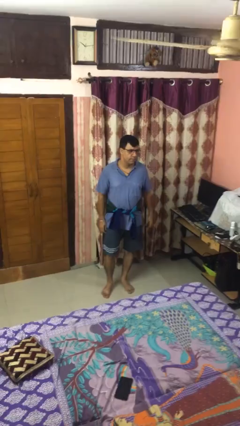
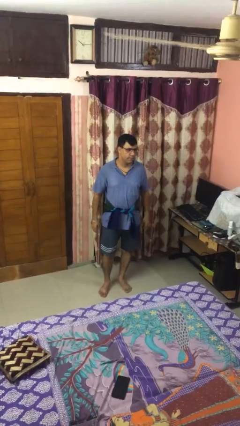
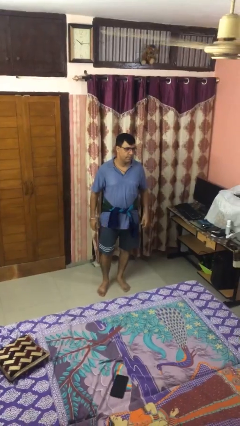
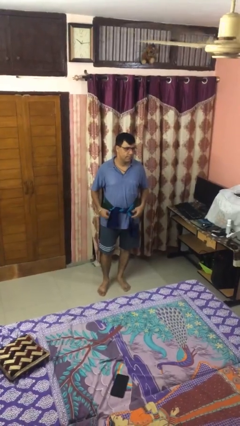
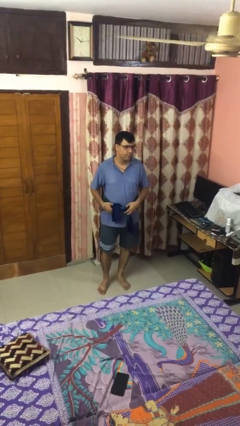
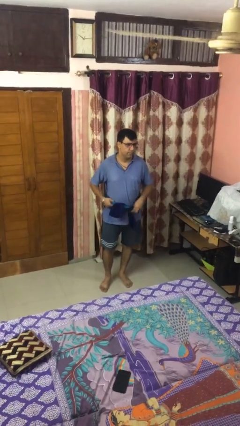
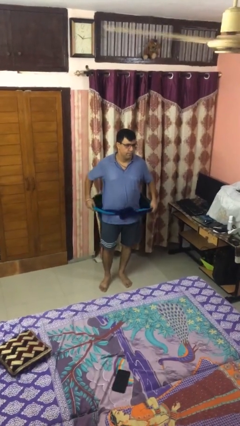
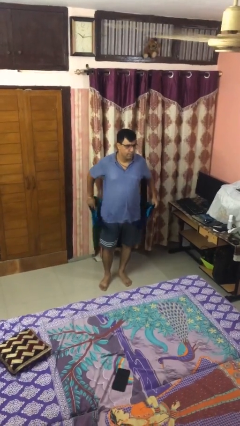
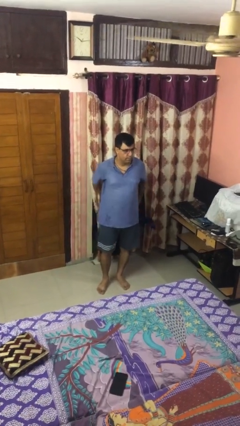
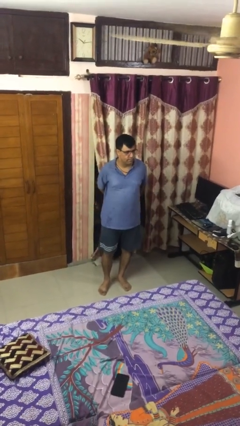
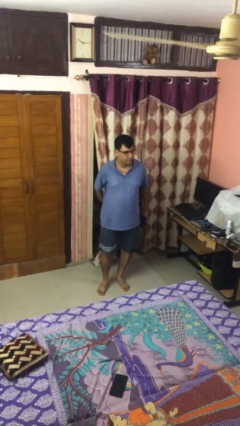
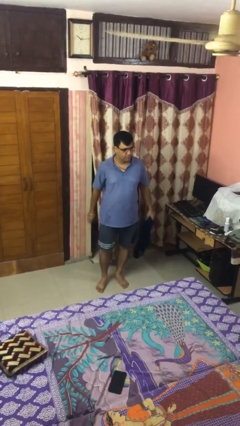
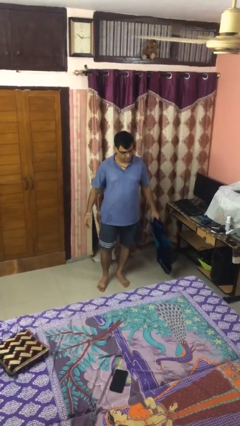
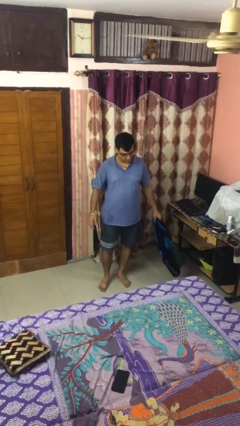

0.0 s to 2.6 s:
person unties jacket around waist

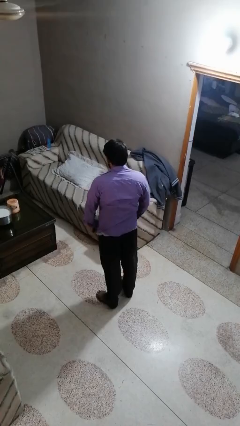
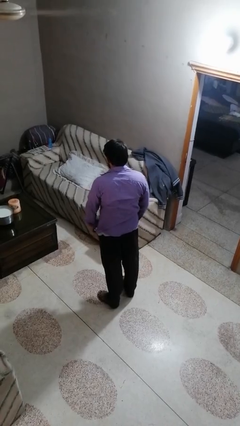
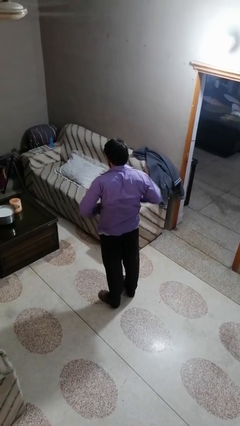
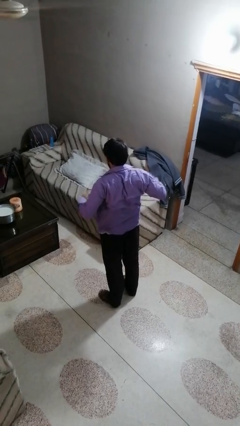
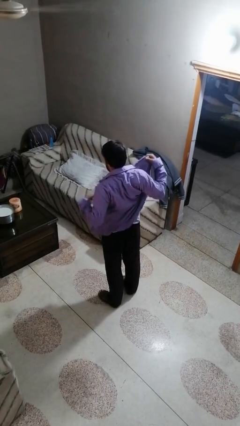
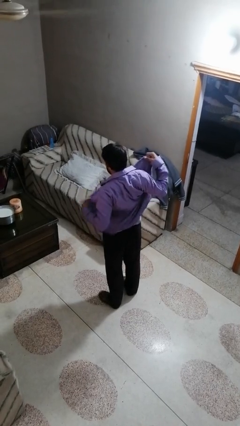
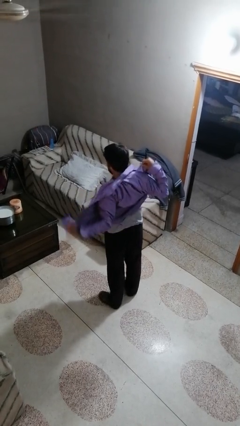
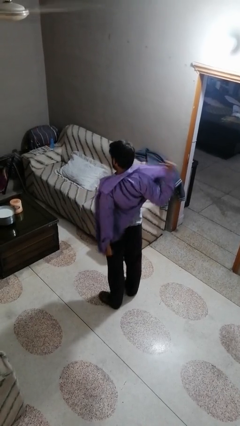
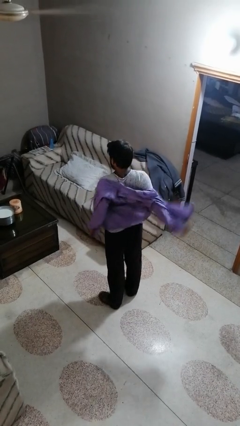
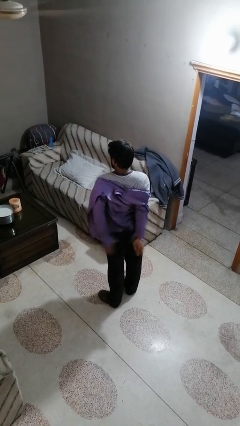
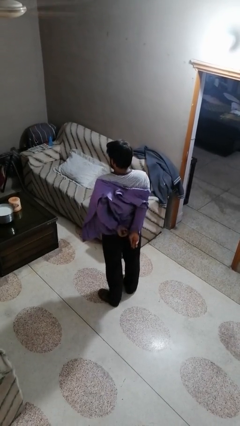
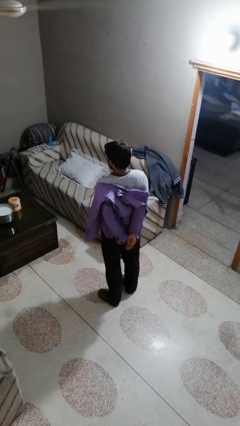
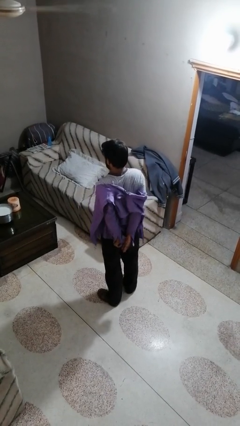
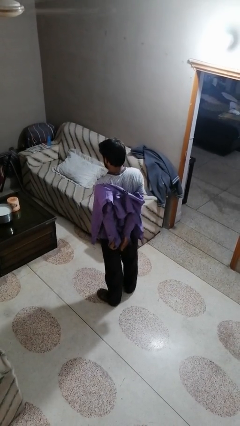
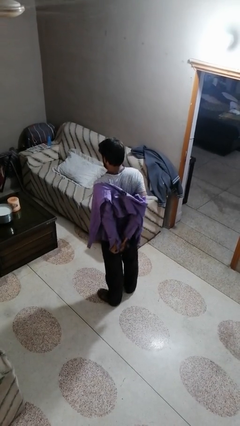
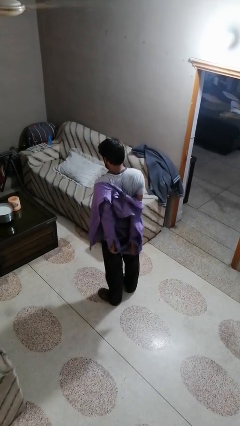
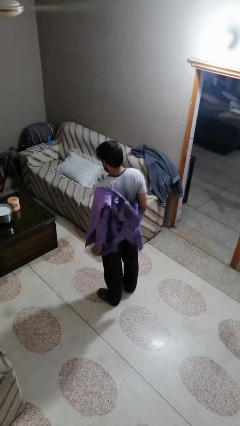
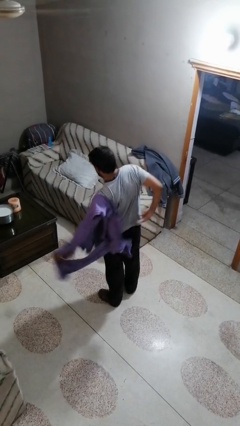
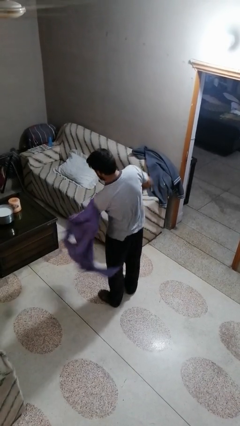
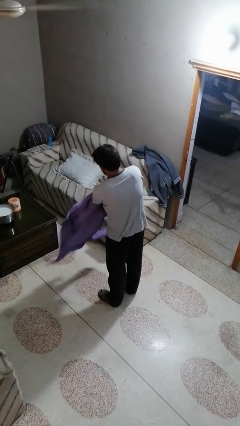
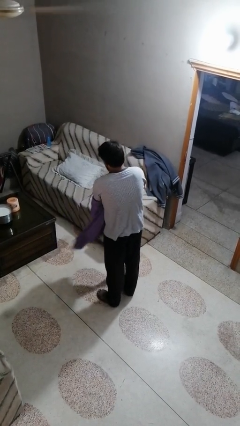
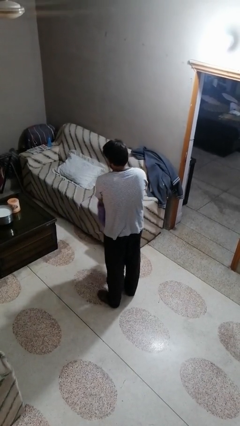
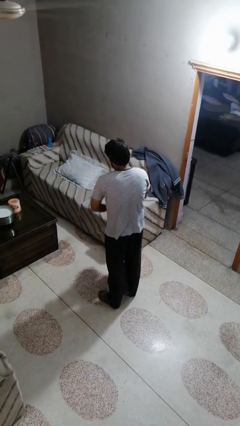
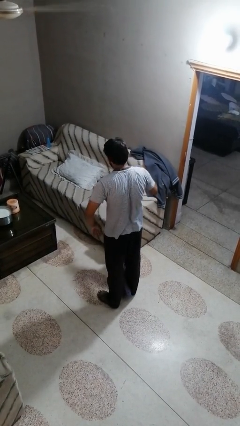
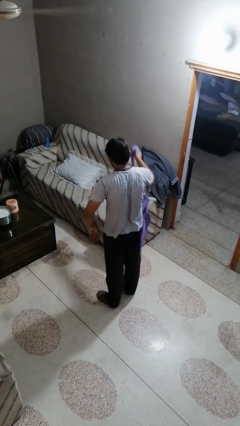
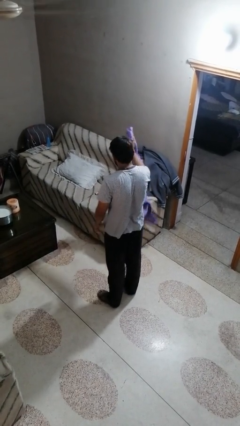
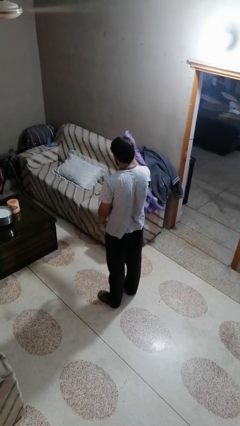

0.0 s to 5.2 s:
person takes off shirt

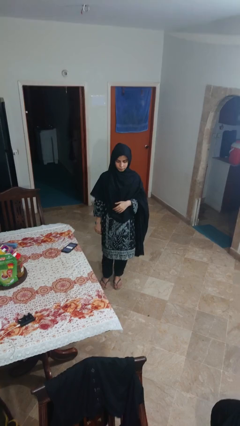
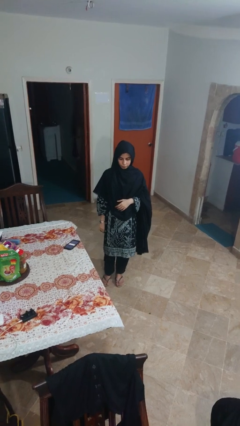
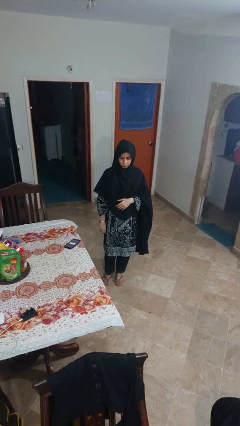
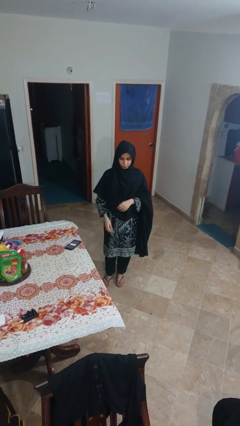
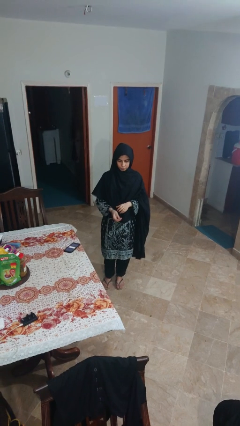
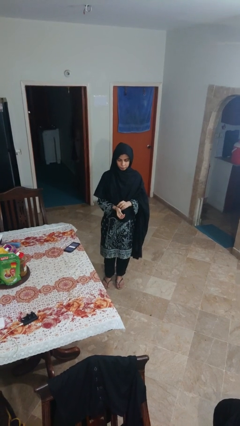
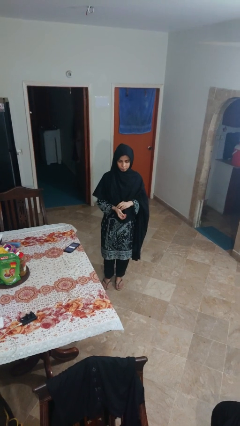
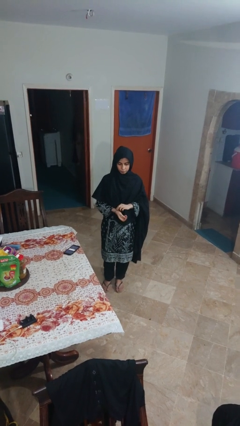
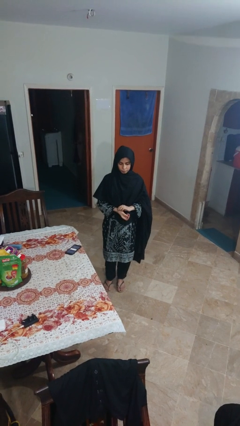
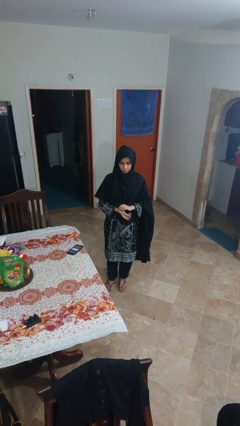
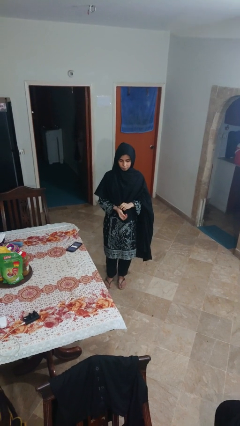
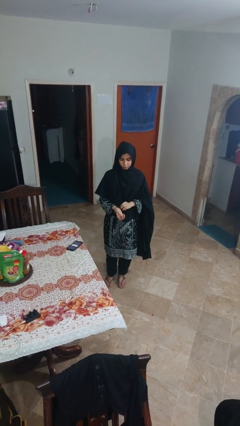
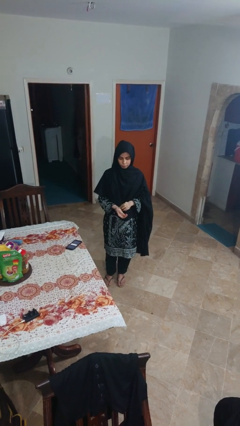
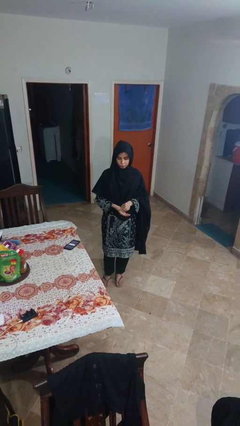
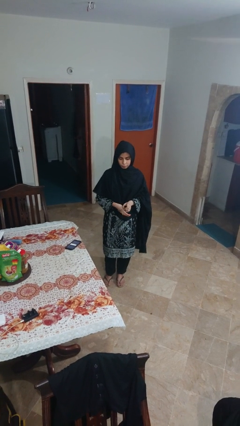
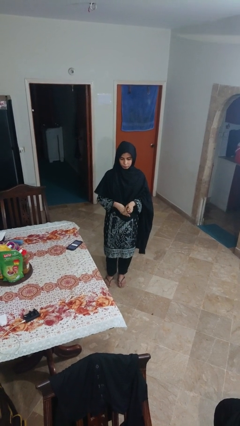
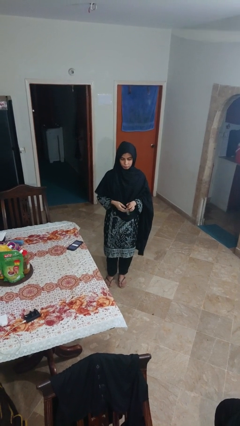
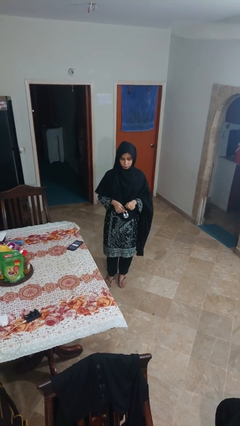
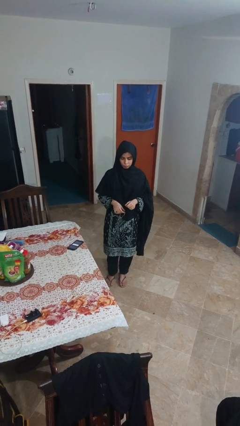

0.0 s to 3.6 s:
person takes off wristwatch

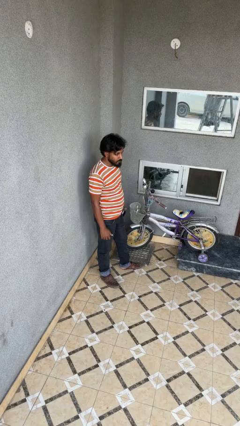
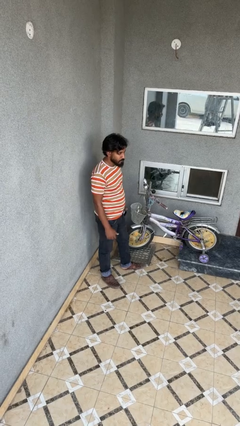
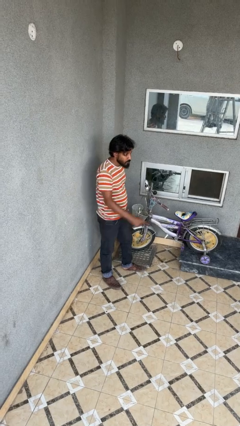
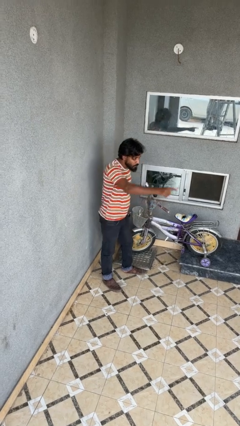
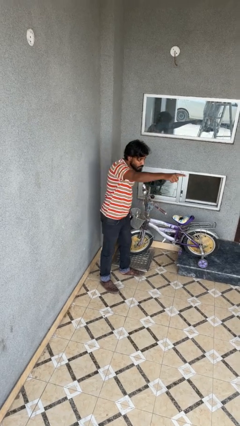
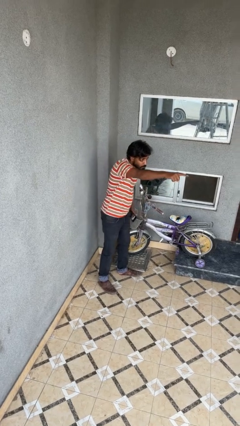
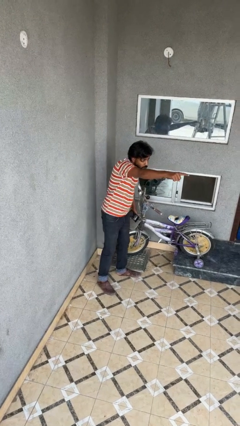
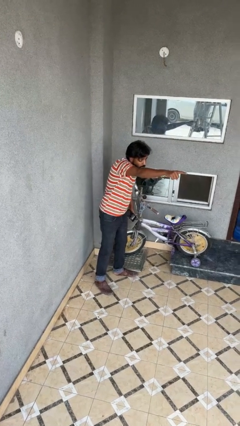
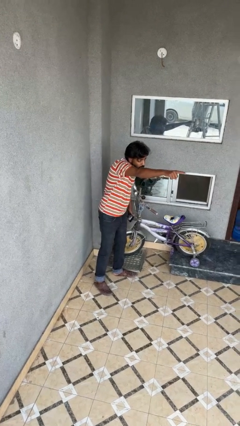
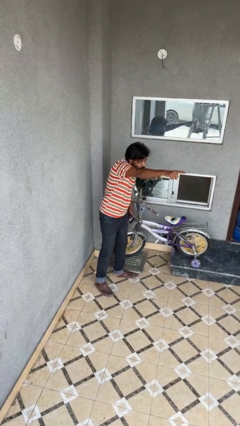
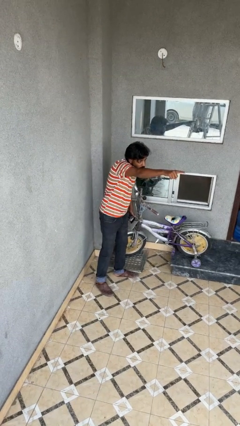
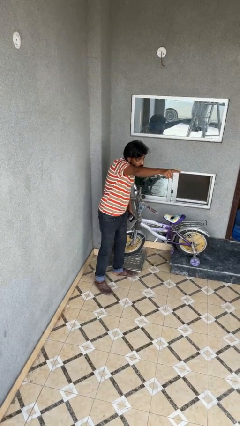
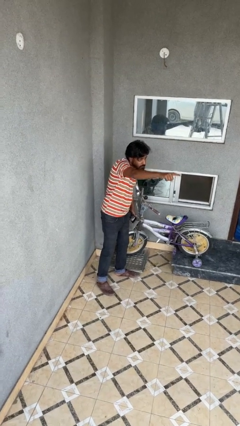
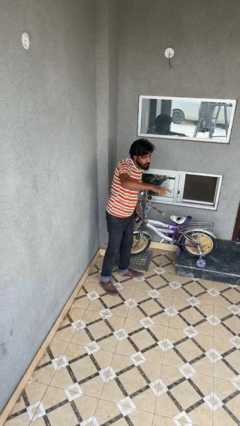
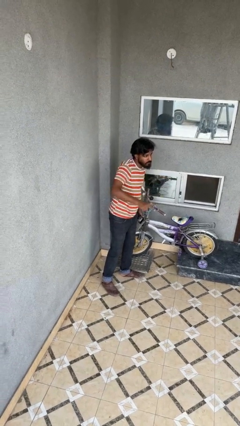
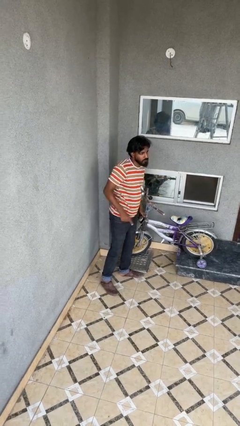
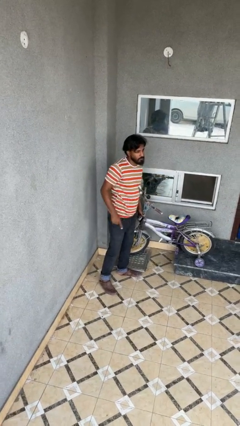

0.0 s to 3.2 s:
person points at person

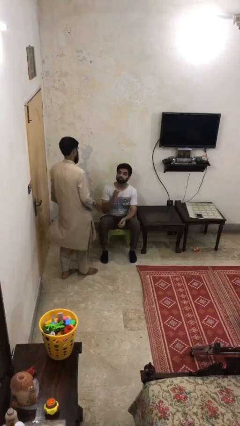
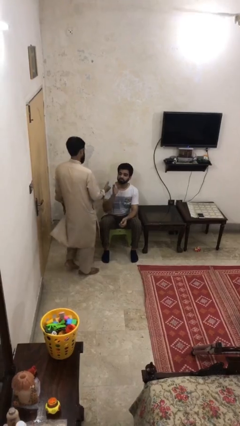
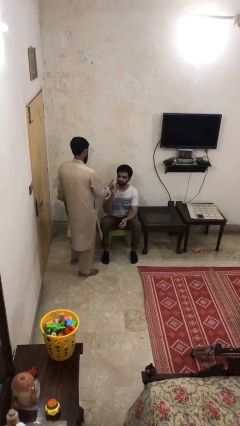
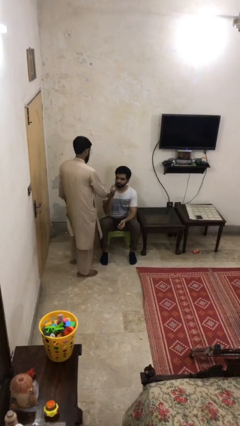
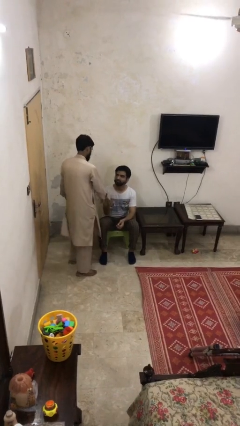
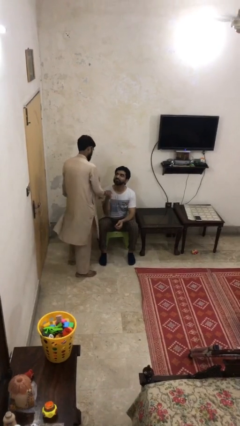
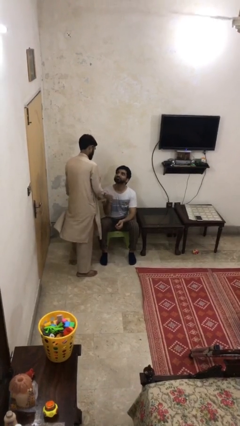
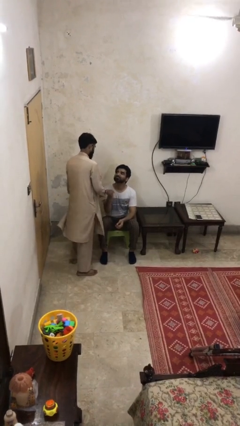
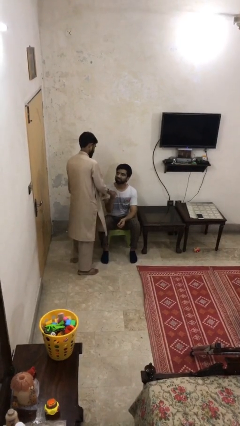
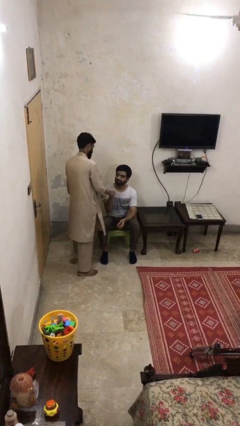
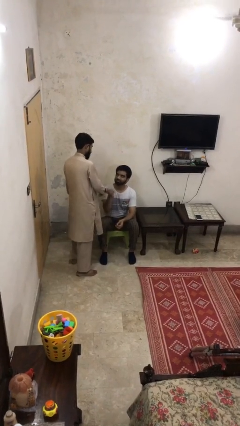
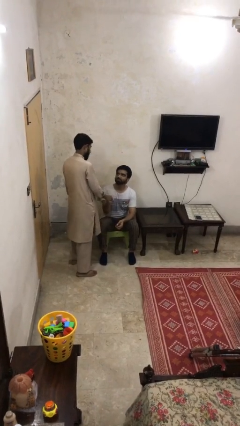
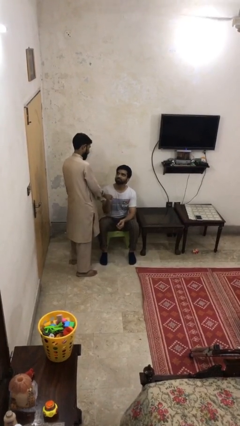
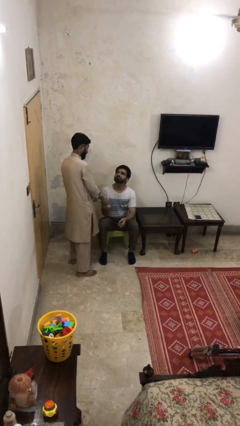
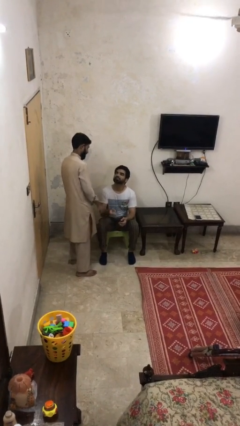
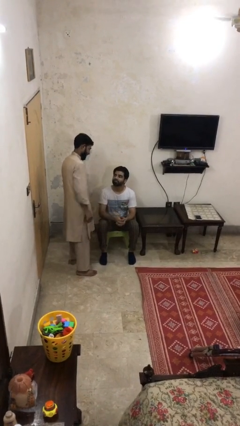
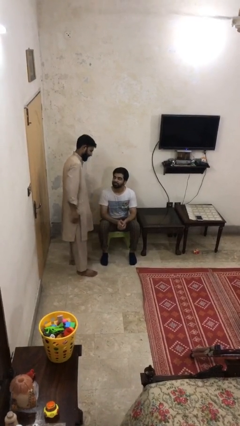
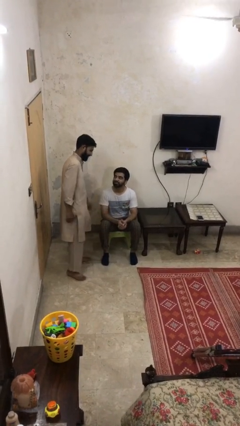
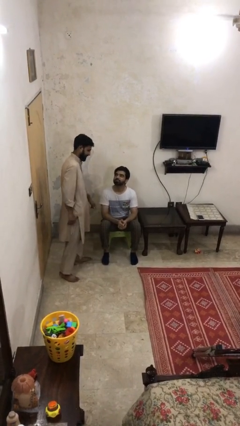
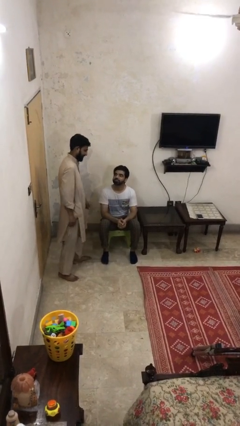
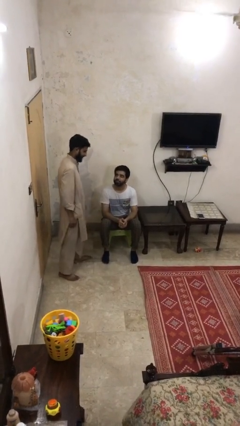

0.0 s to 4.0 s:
person shakes hand
